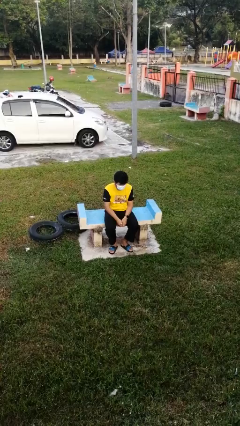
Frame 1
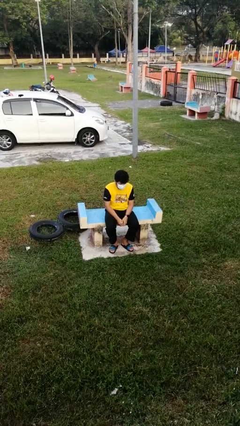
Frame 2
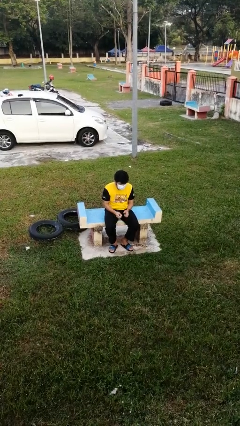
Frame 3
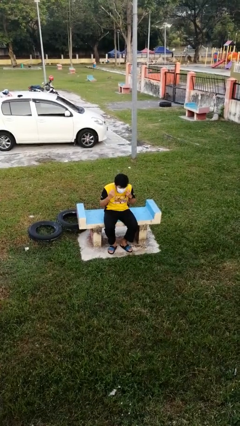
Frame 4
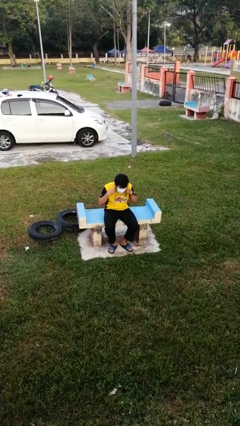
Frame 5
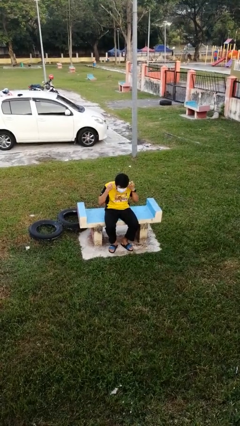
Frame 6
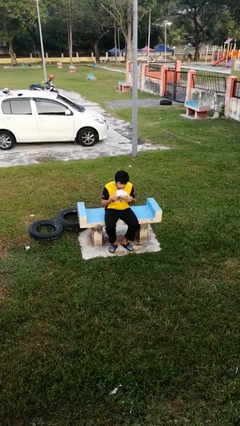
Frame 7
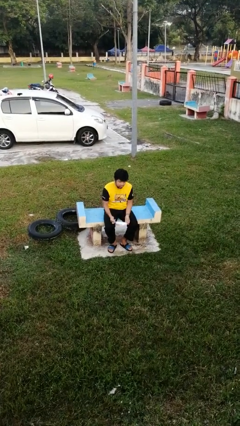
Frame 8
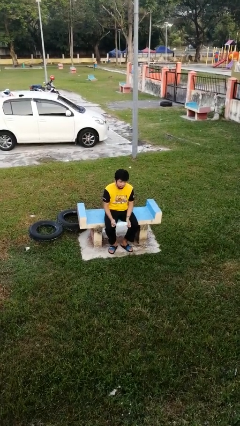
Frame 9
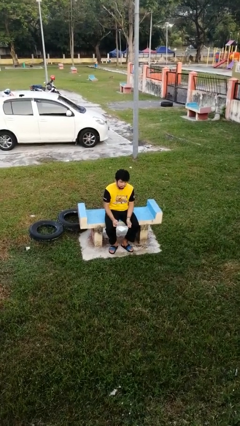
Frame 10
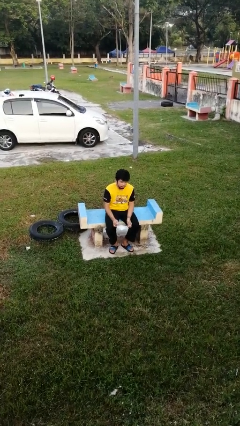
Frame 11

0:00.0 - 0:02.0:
person takes off facemask

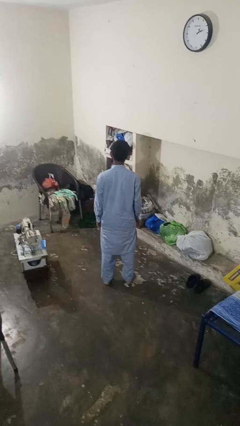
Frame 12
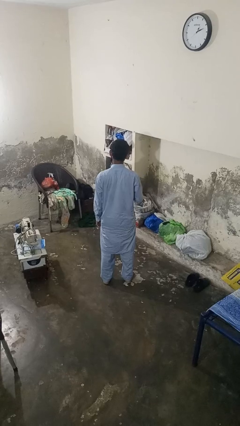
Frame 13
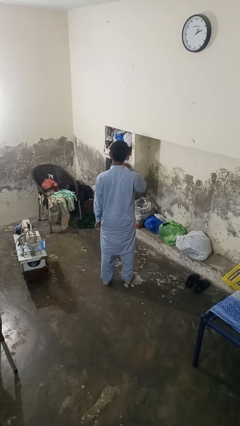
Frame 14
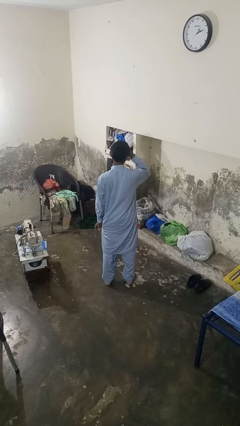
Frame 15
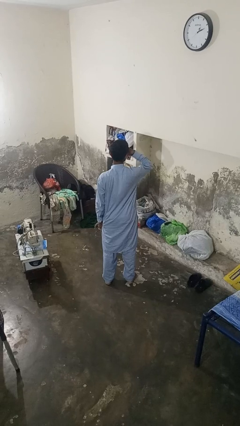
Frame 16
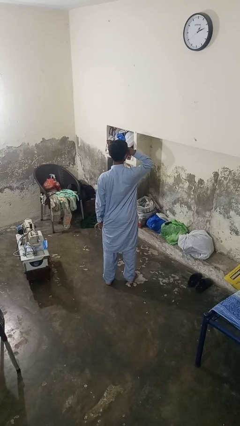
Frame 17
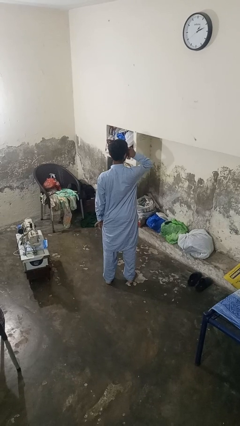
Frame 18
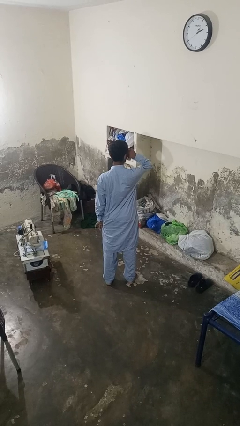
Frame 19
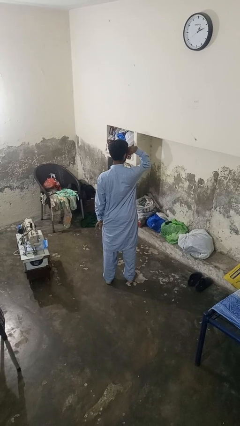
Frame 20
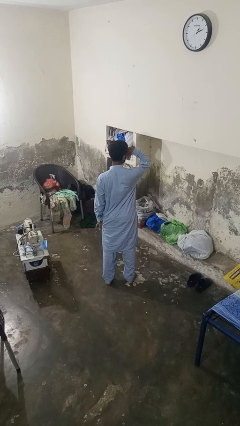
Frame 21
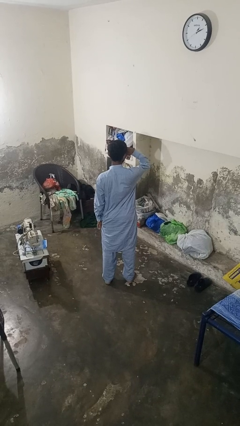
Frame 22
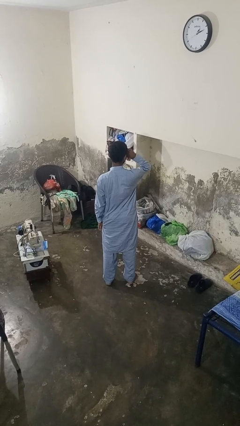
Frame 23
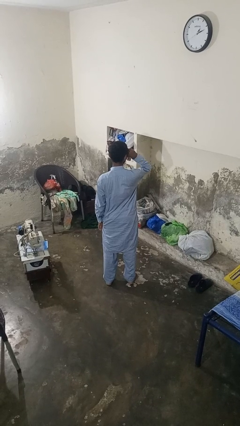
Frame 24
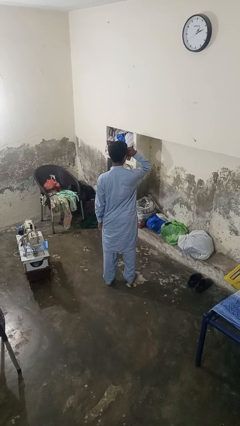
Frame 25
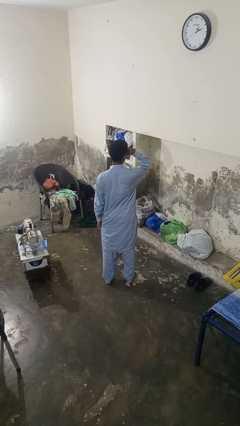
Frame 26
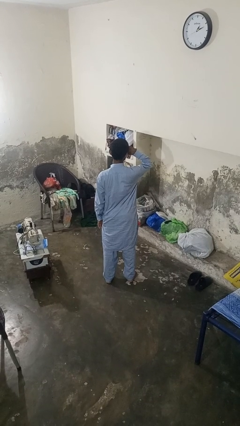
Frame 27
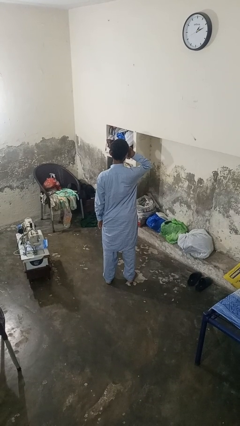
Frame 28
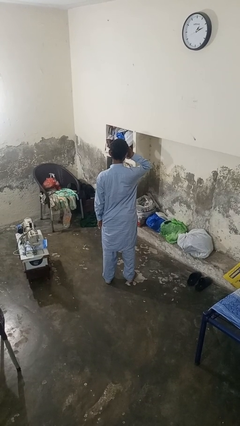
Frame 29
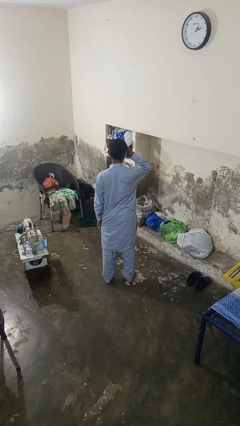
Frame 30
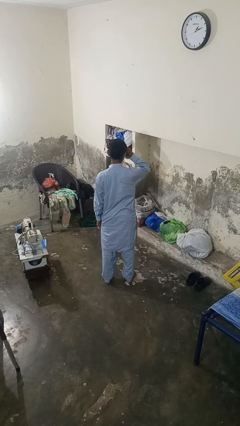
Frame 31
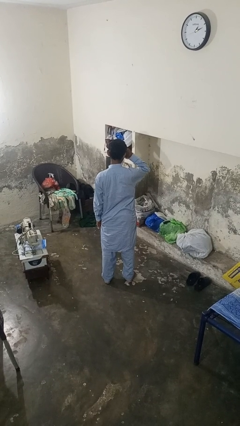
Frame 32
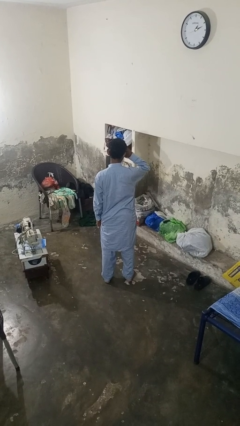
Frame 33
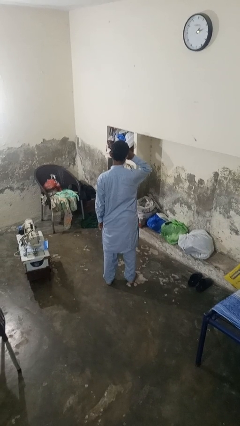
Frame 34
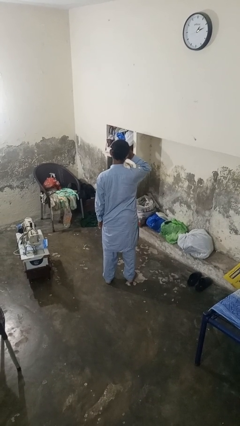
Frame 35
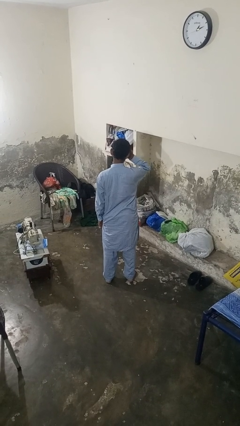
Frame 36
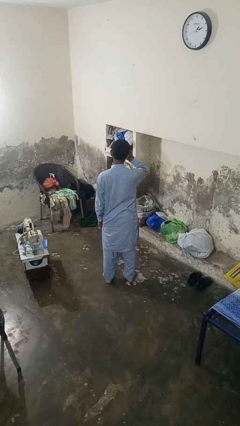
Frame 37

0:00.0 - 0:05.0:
person rubs eyes

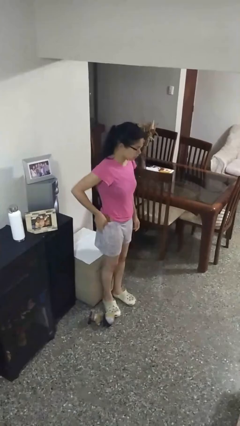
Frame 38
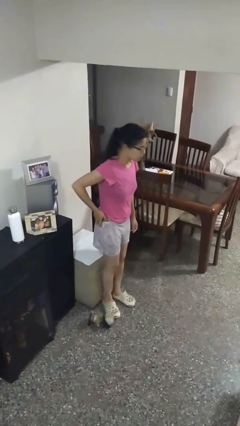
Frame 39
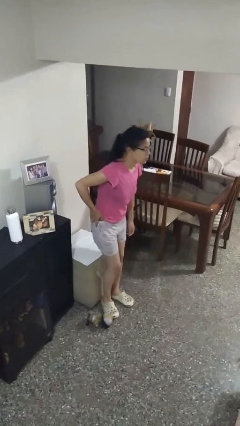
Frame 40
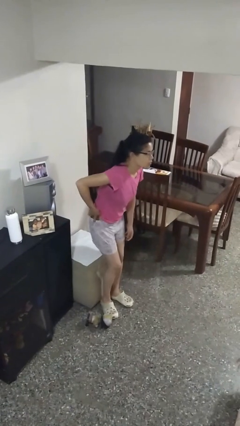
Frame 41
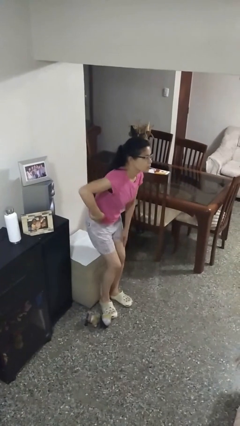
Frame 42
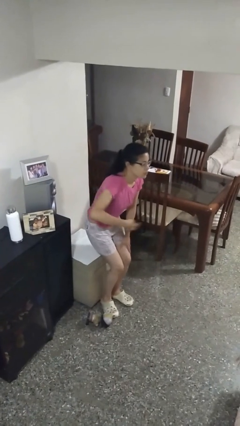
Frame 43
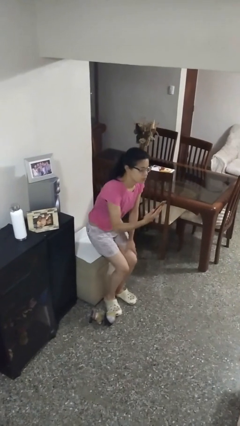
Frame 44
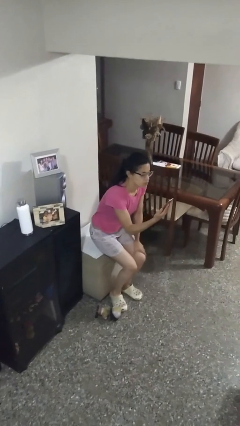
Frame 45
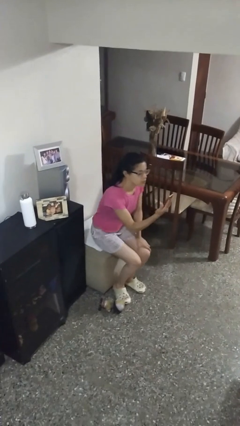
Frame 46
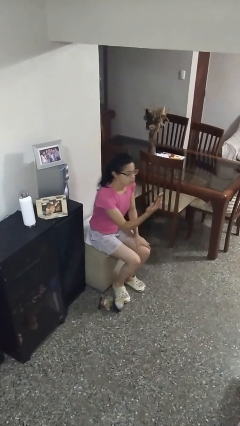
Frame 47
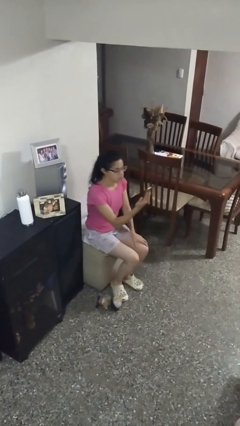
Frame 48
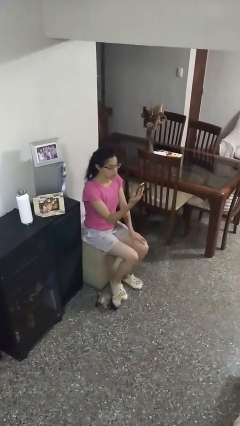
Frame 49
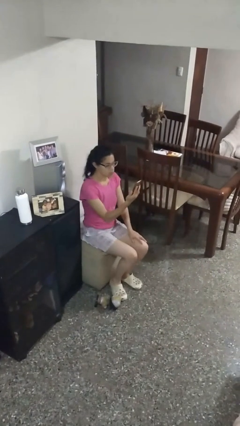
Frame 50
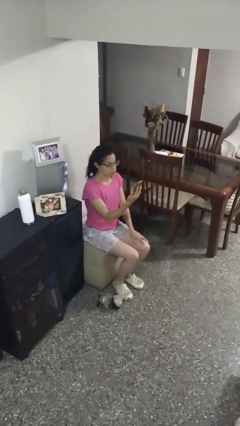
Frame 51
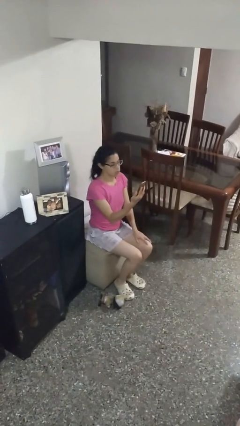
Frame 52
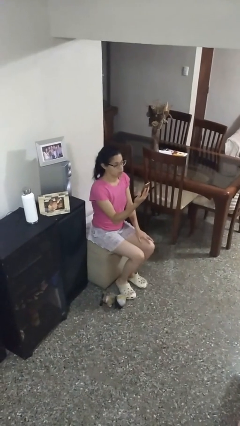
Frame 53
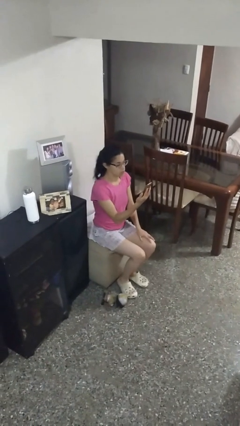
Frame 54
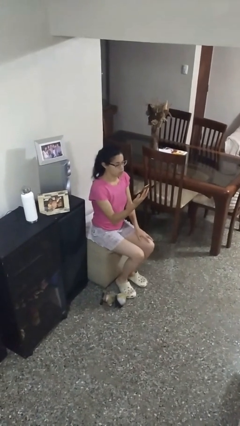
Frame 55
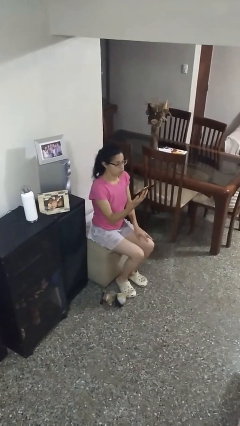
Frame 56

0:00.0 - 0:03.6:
person takes phone from pocket

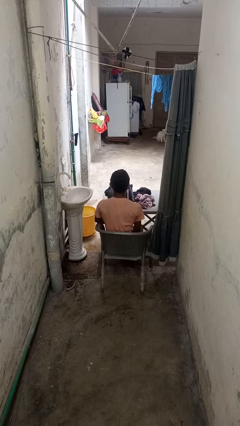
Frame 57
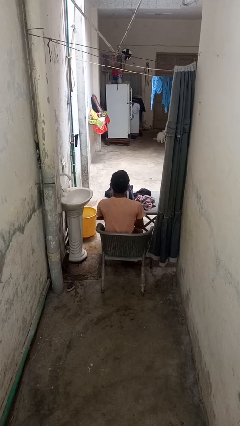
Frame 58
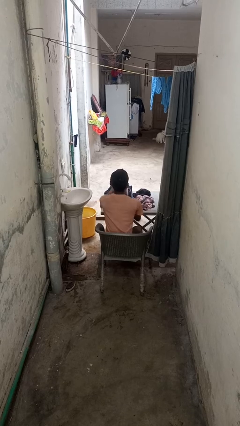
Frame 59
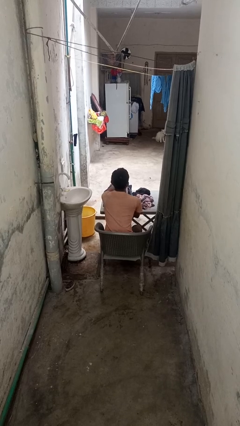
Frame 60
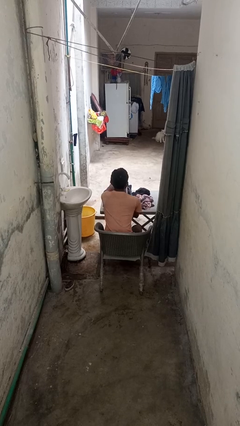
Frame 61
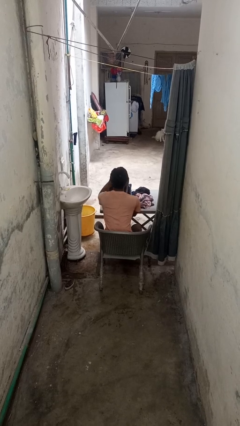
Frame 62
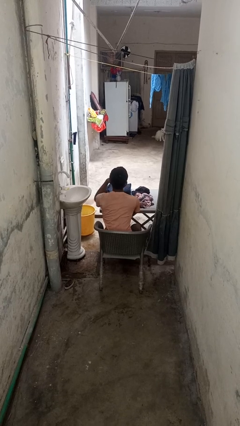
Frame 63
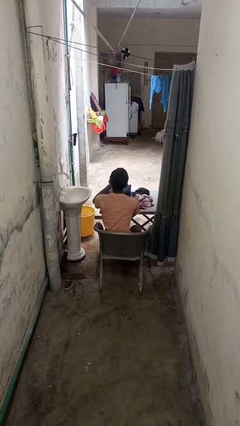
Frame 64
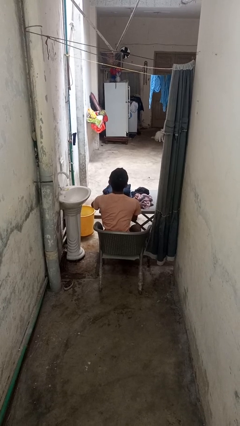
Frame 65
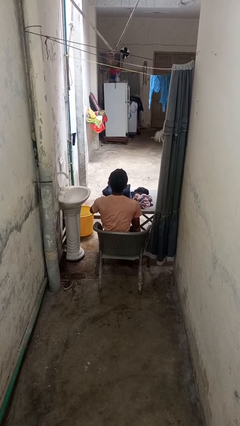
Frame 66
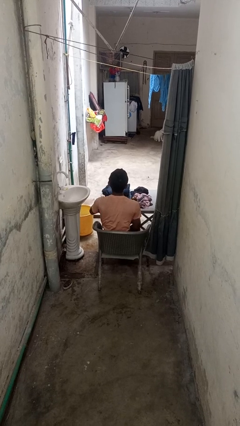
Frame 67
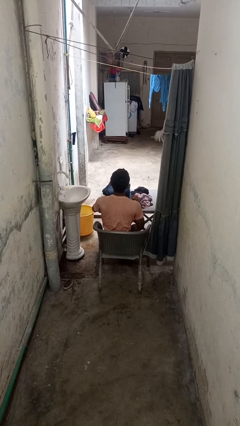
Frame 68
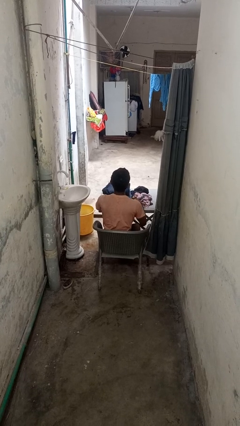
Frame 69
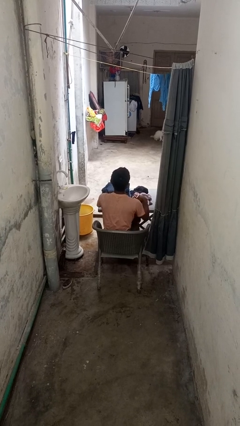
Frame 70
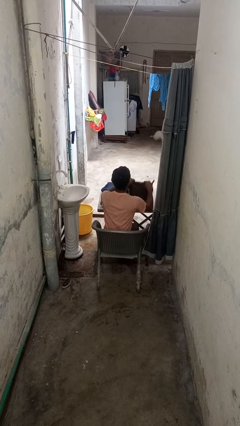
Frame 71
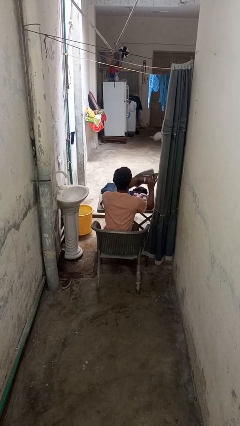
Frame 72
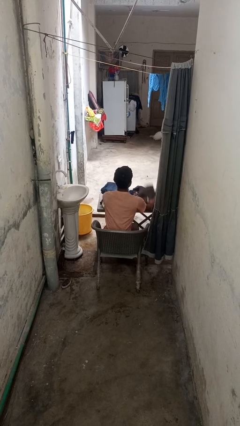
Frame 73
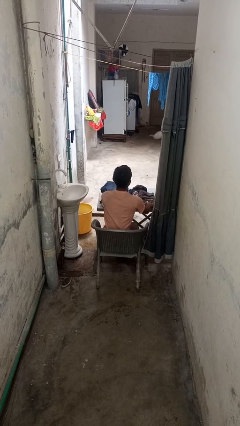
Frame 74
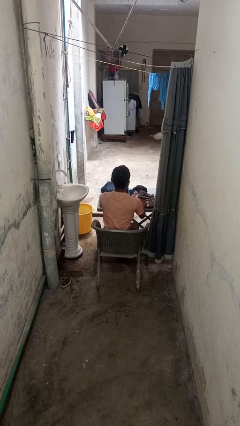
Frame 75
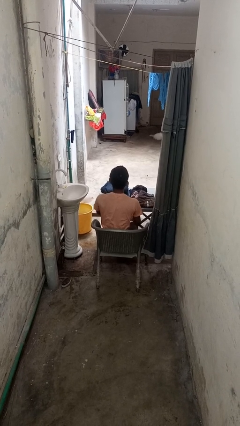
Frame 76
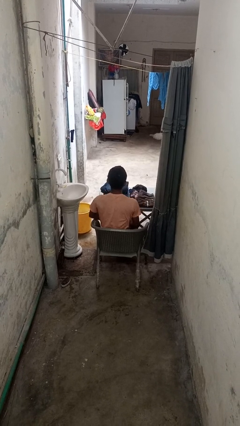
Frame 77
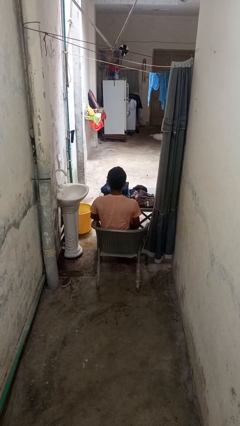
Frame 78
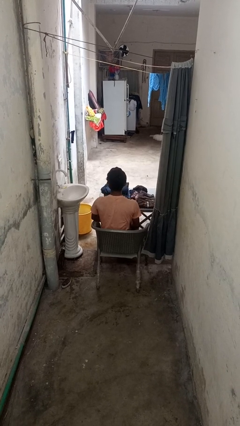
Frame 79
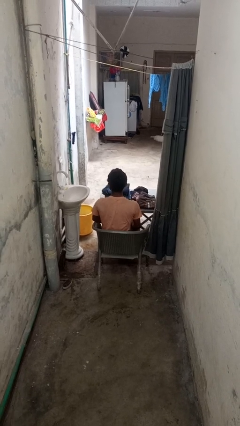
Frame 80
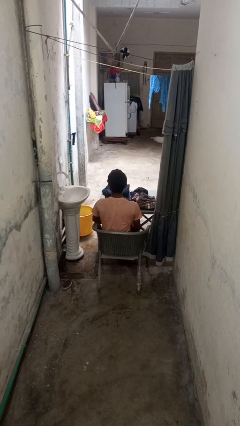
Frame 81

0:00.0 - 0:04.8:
person folds pants

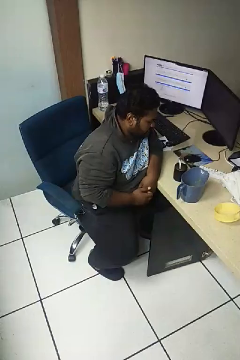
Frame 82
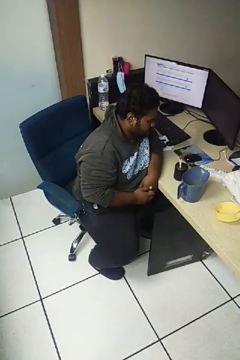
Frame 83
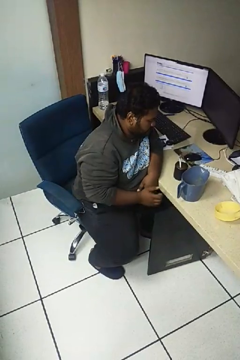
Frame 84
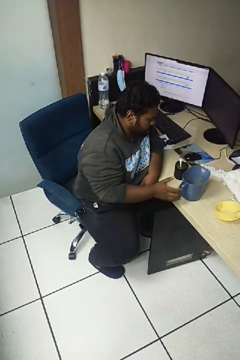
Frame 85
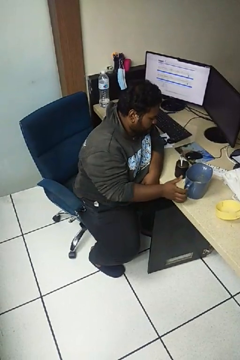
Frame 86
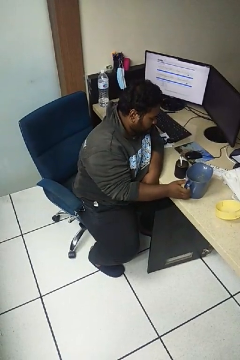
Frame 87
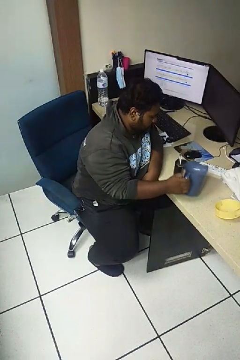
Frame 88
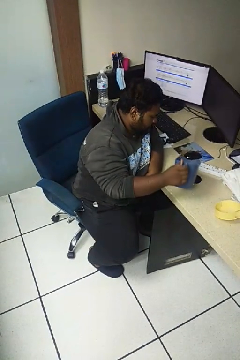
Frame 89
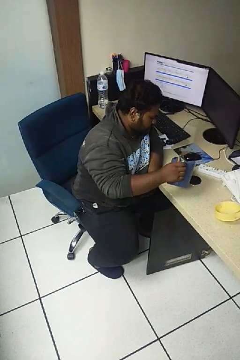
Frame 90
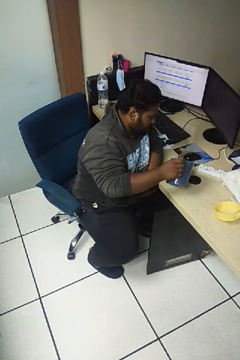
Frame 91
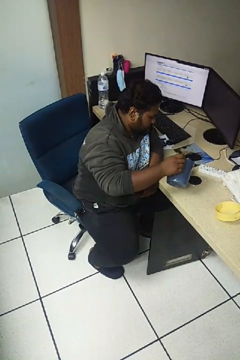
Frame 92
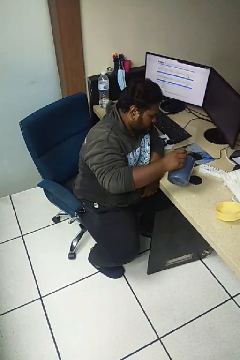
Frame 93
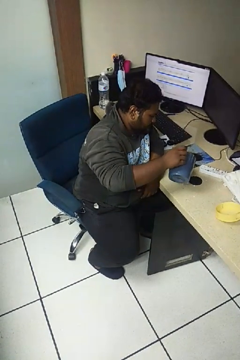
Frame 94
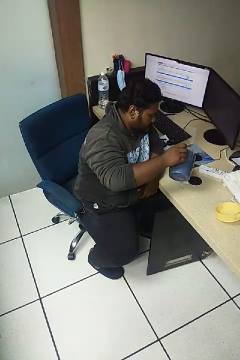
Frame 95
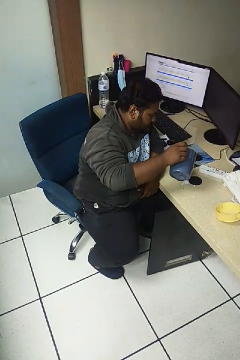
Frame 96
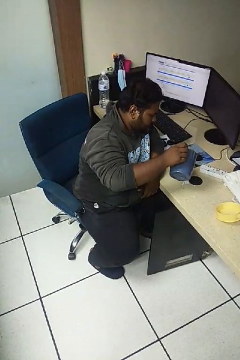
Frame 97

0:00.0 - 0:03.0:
person pours coffee into mug

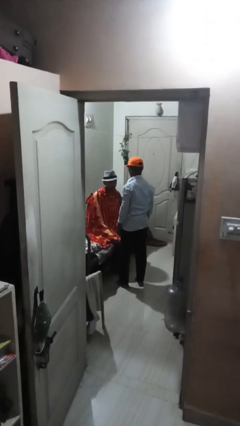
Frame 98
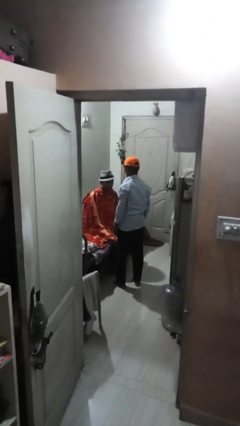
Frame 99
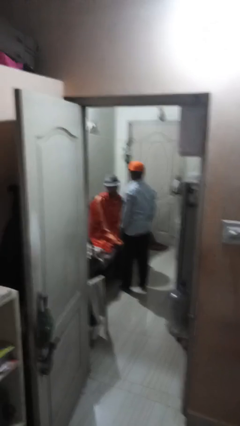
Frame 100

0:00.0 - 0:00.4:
person uncovers friend with blanket
